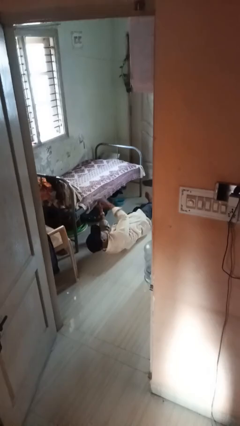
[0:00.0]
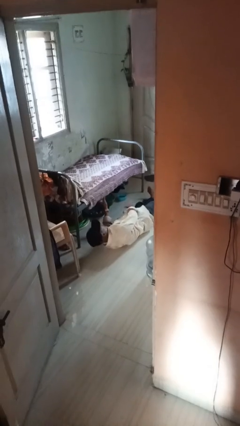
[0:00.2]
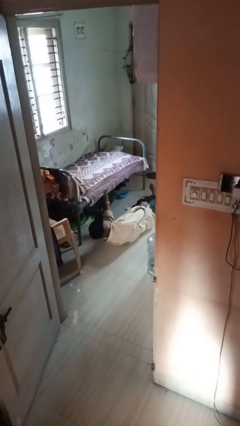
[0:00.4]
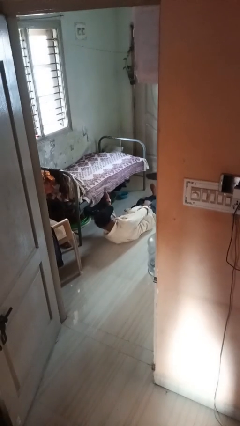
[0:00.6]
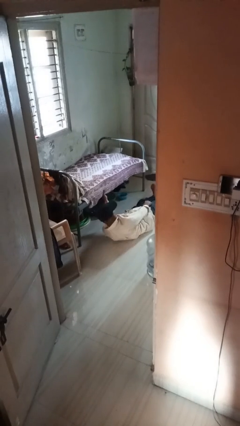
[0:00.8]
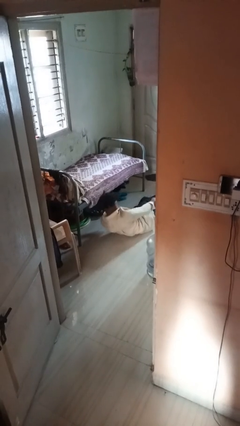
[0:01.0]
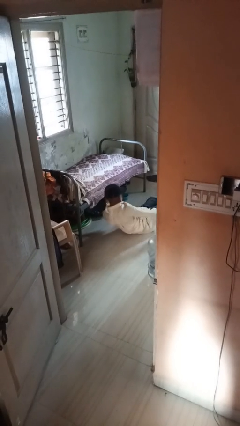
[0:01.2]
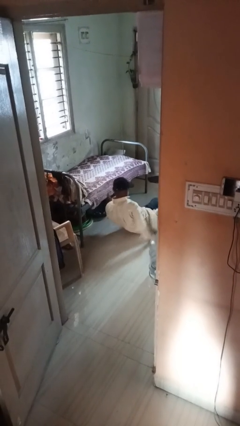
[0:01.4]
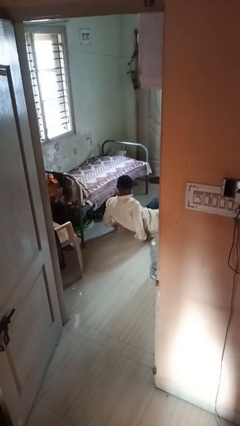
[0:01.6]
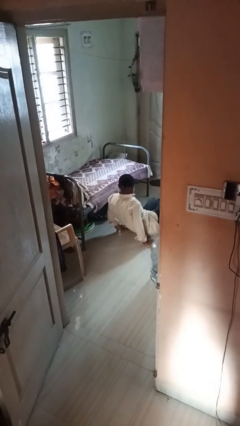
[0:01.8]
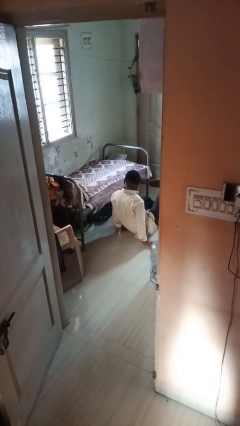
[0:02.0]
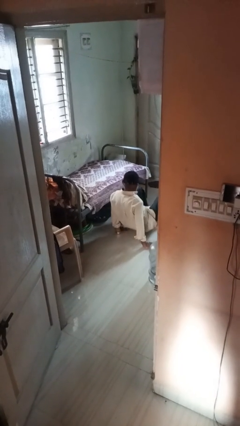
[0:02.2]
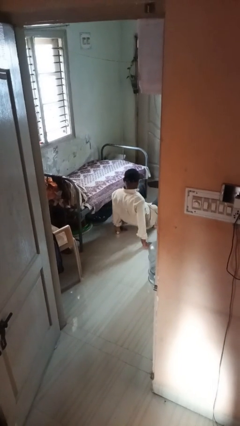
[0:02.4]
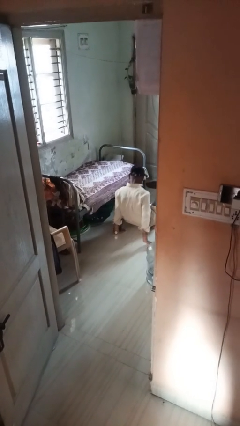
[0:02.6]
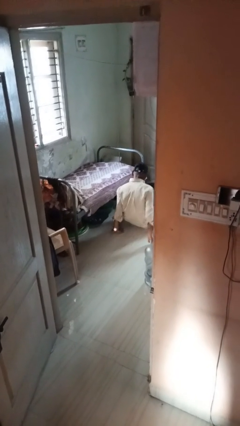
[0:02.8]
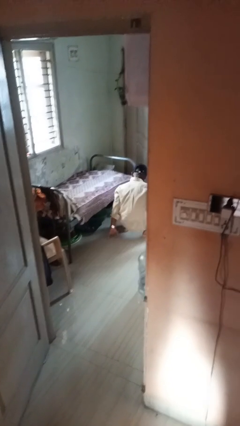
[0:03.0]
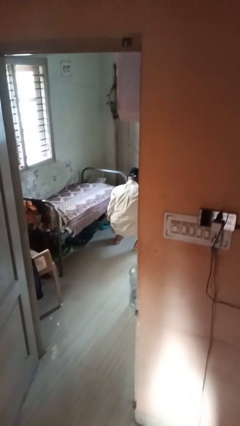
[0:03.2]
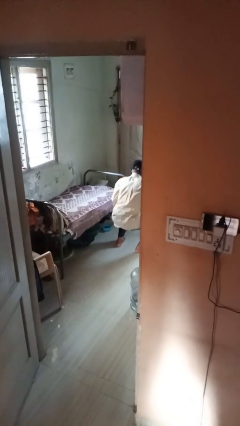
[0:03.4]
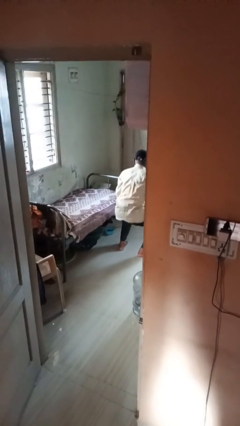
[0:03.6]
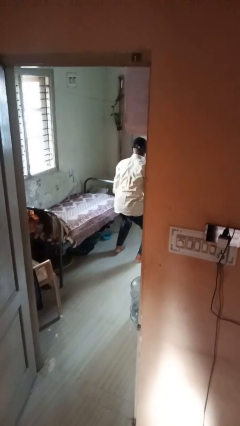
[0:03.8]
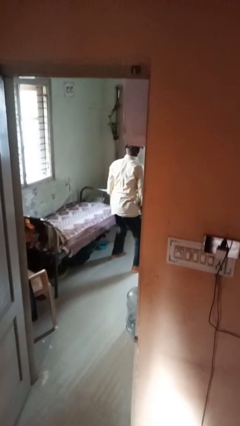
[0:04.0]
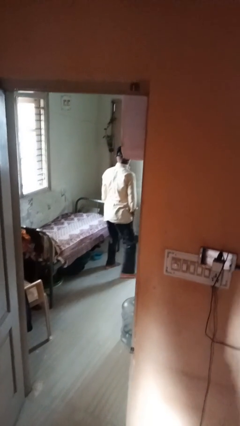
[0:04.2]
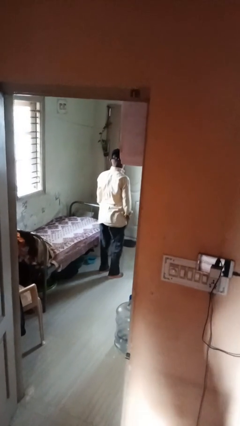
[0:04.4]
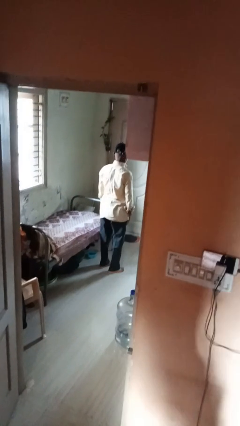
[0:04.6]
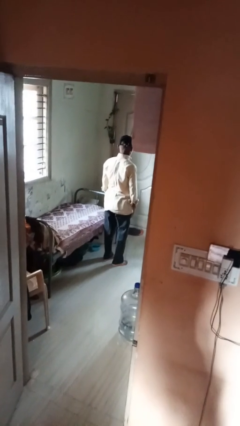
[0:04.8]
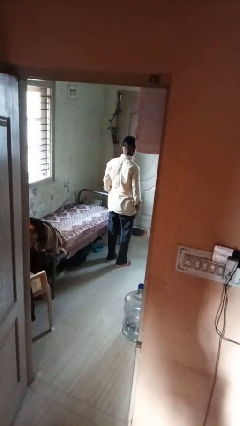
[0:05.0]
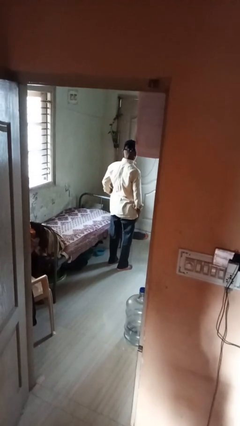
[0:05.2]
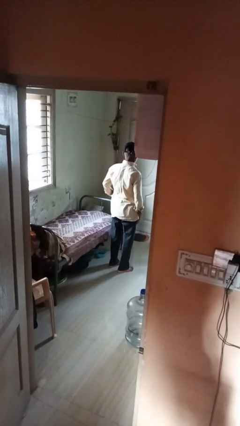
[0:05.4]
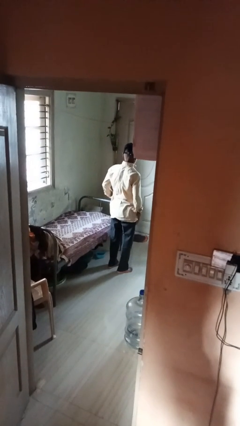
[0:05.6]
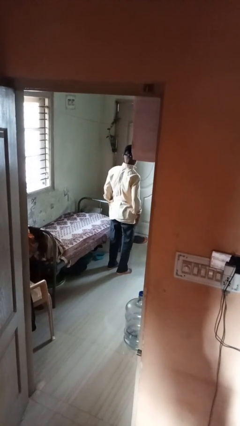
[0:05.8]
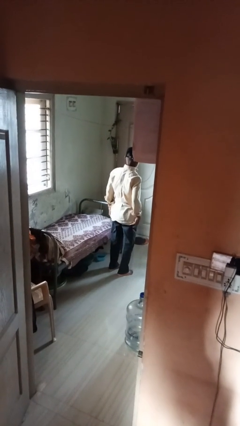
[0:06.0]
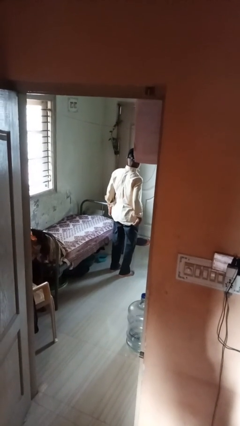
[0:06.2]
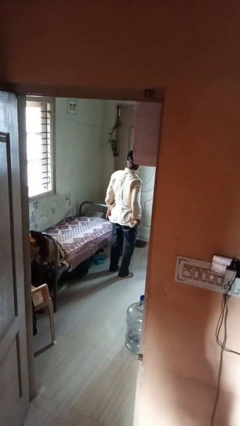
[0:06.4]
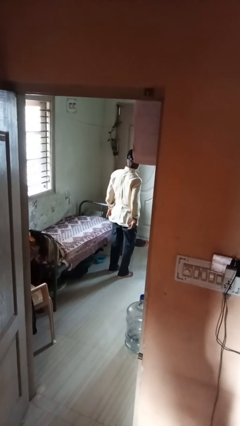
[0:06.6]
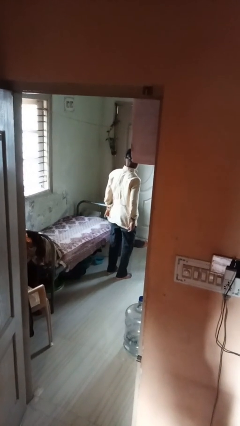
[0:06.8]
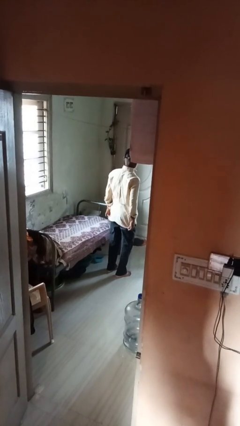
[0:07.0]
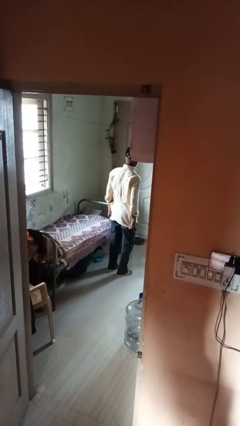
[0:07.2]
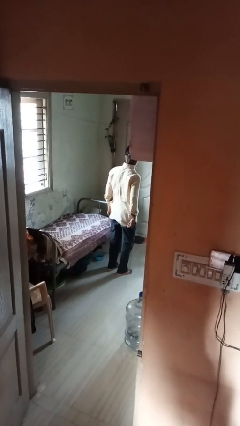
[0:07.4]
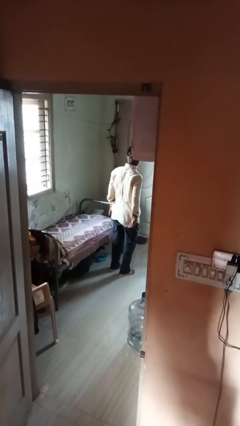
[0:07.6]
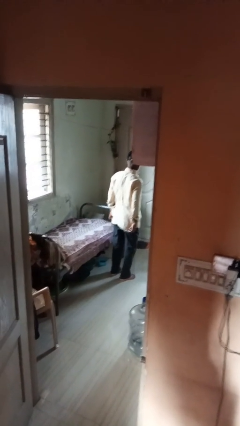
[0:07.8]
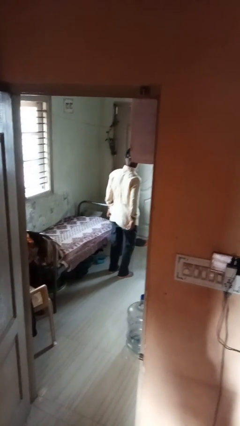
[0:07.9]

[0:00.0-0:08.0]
person stands up from floor

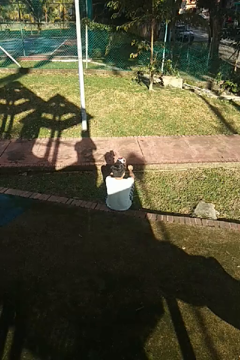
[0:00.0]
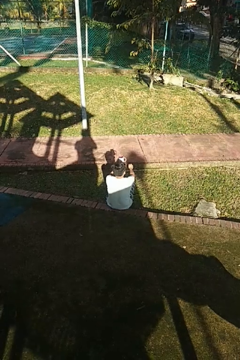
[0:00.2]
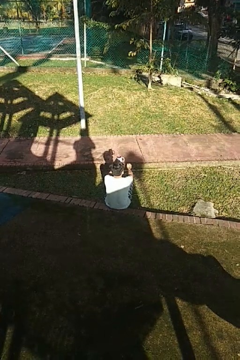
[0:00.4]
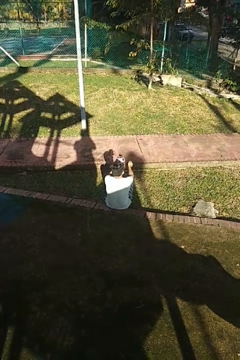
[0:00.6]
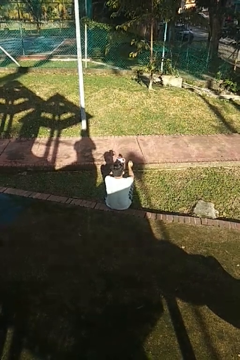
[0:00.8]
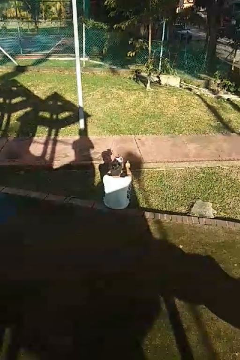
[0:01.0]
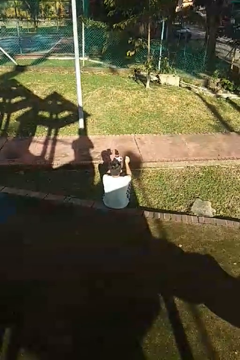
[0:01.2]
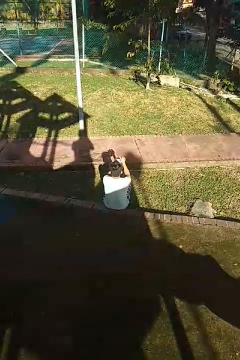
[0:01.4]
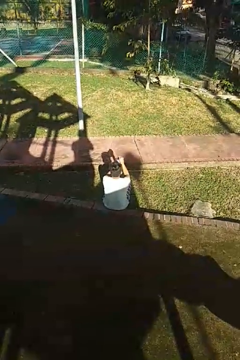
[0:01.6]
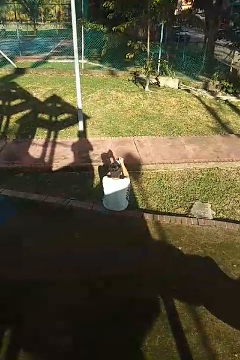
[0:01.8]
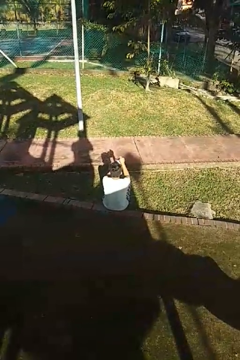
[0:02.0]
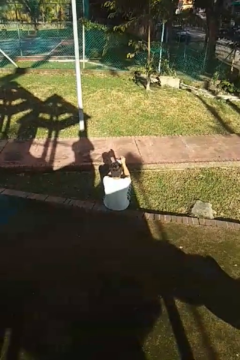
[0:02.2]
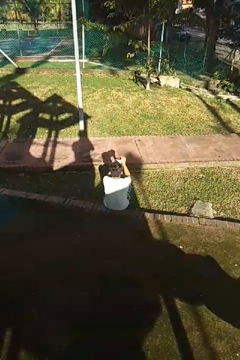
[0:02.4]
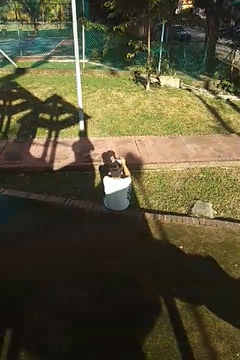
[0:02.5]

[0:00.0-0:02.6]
person stirs mug

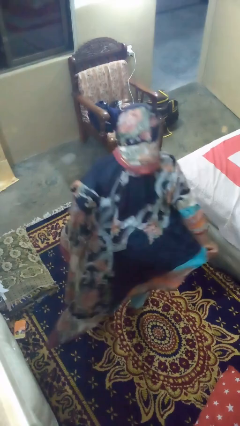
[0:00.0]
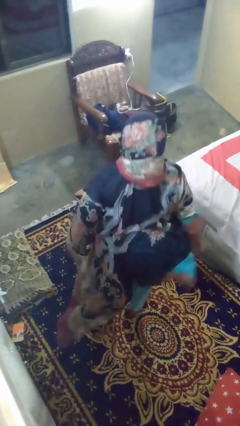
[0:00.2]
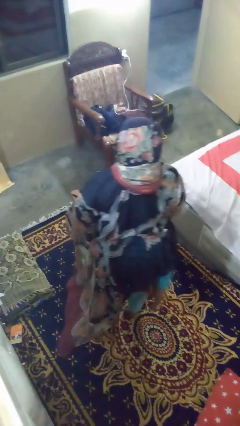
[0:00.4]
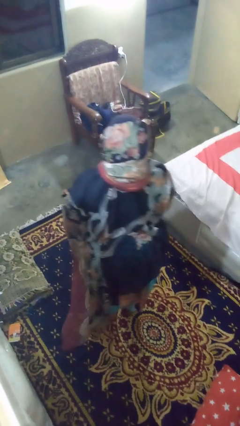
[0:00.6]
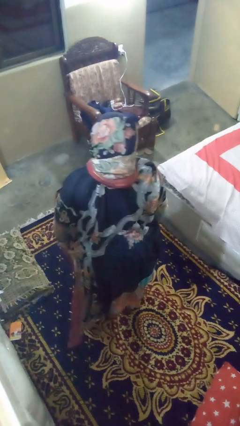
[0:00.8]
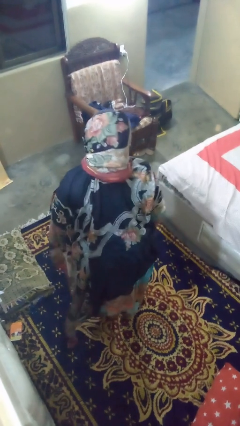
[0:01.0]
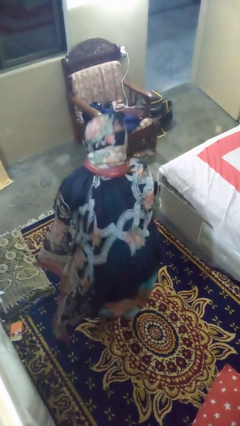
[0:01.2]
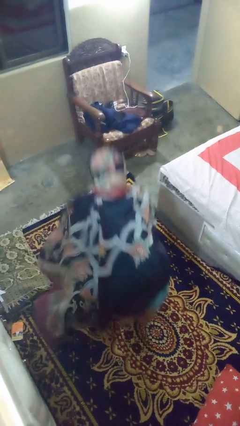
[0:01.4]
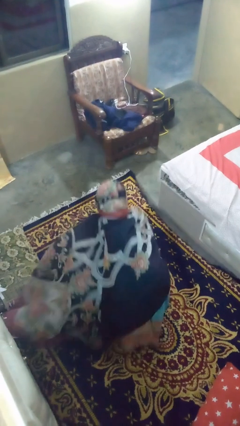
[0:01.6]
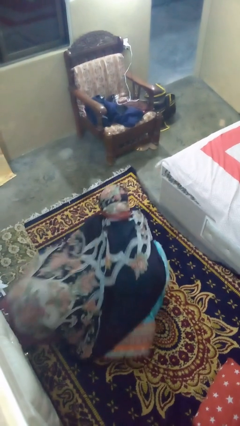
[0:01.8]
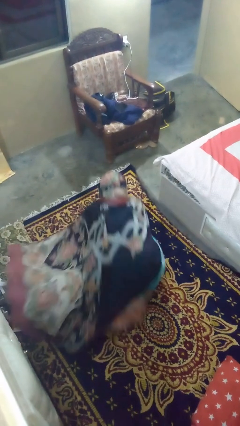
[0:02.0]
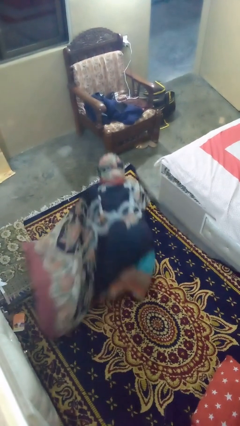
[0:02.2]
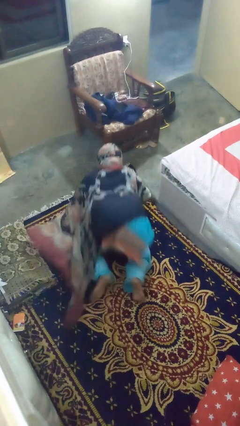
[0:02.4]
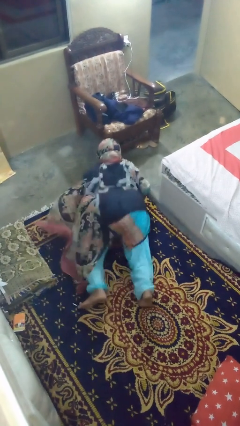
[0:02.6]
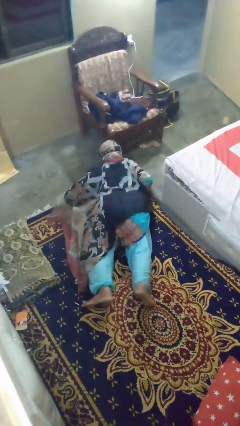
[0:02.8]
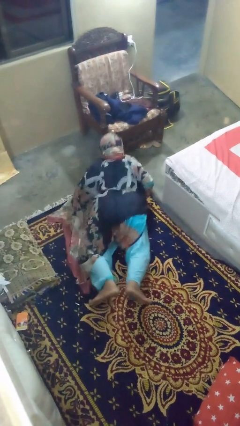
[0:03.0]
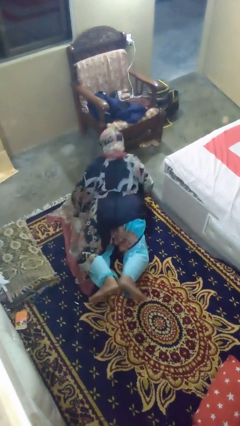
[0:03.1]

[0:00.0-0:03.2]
person exercises with pushup

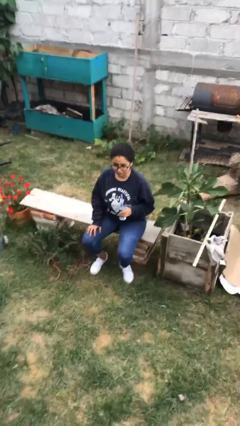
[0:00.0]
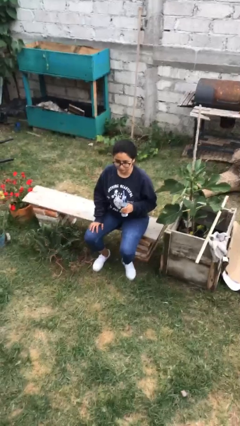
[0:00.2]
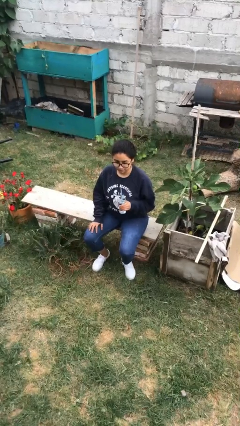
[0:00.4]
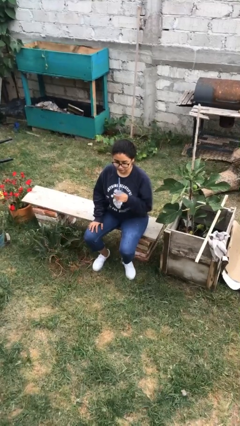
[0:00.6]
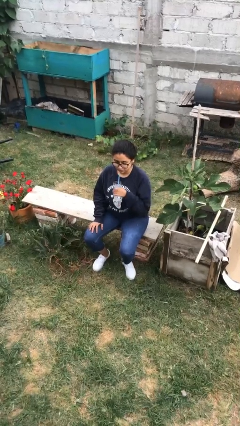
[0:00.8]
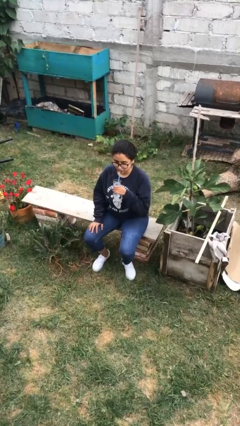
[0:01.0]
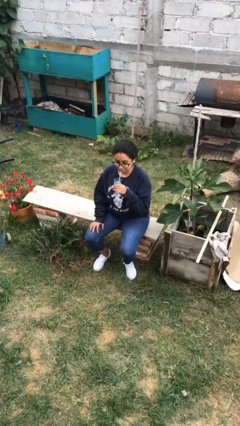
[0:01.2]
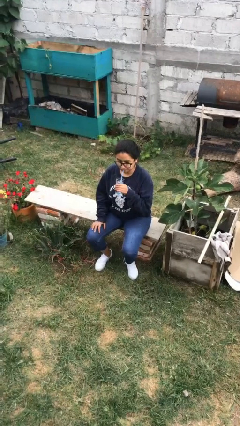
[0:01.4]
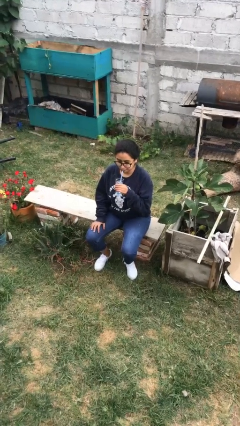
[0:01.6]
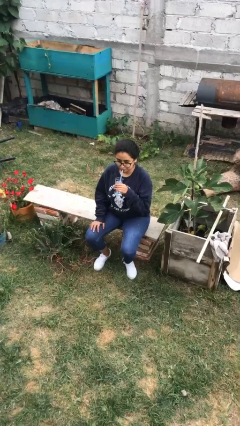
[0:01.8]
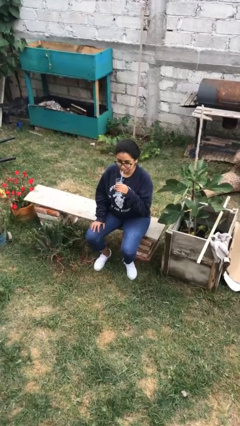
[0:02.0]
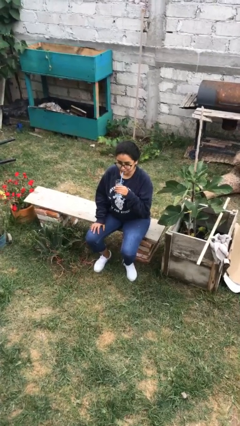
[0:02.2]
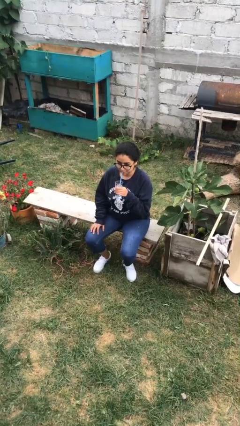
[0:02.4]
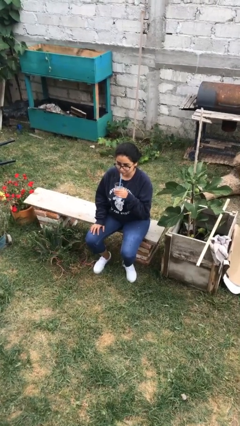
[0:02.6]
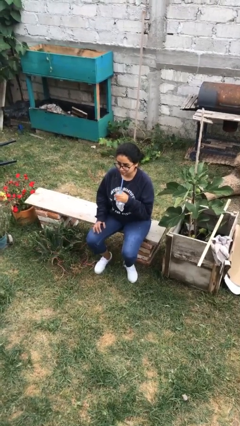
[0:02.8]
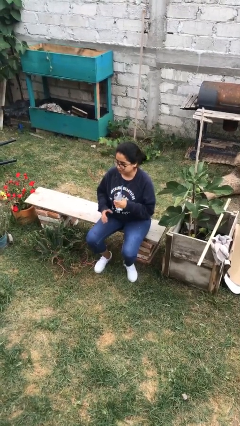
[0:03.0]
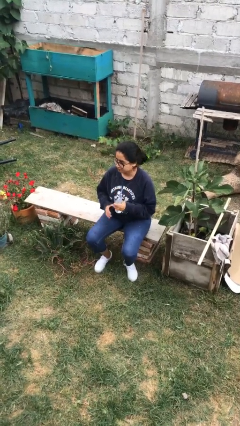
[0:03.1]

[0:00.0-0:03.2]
person drinks from straw

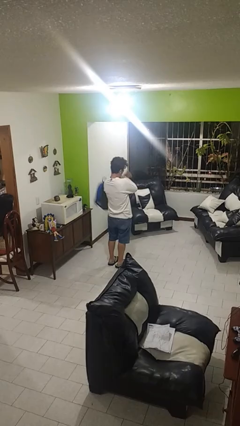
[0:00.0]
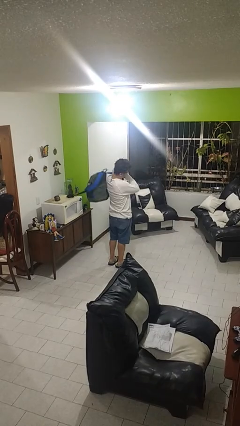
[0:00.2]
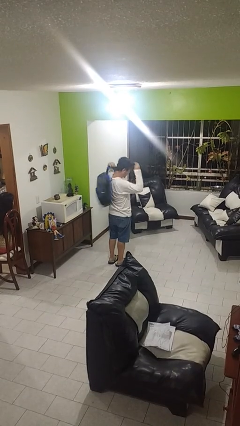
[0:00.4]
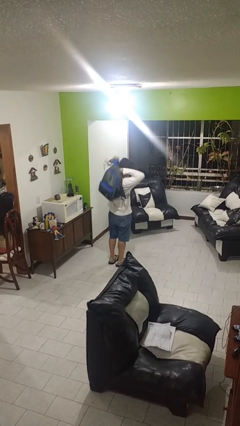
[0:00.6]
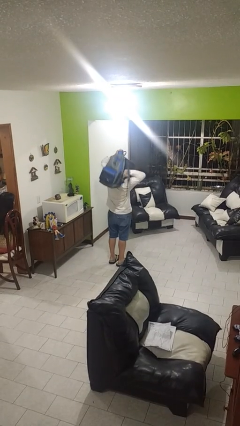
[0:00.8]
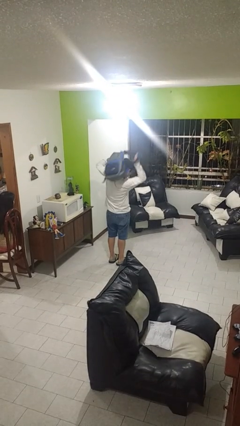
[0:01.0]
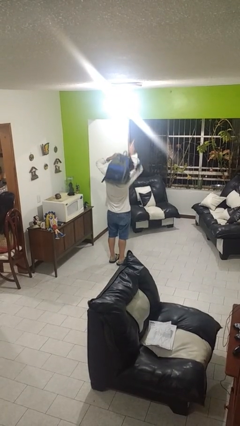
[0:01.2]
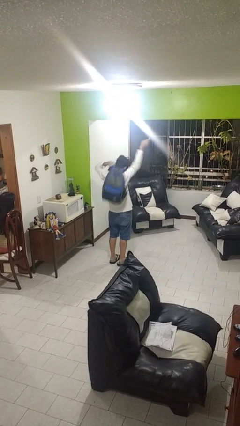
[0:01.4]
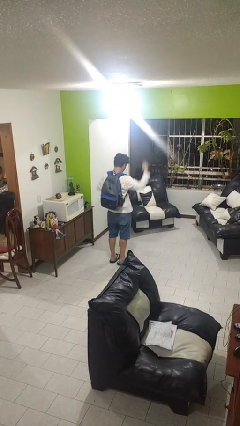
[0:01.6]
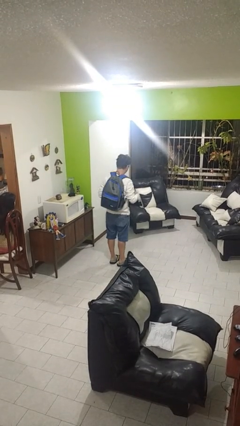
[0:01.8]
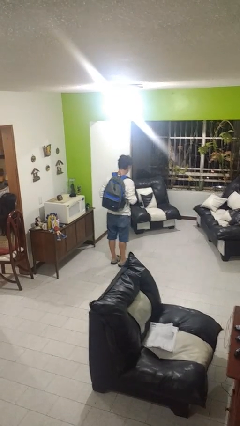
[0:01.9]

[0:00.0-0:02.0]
person puts on backpack
